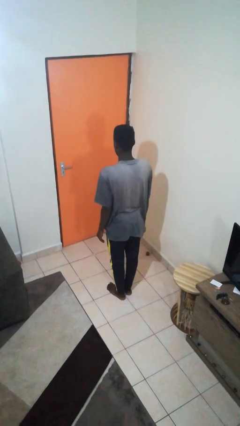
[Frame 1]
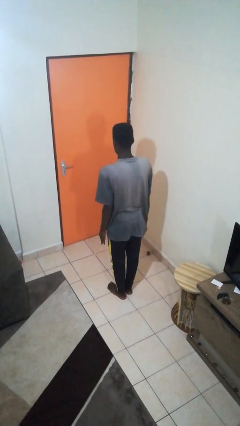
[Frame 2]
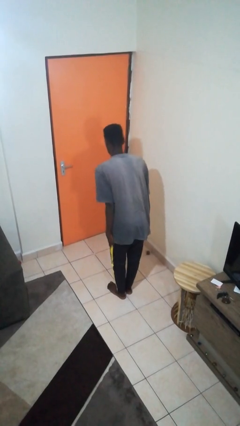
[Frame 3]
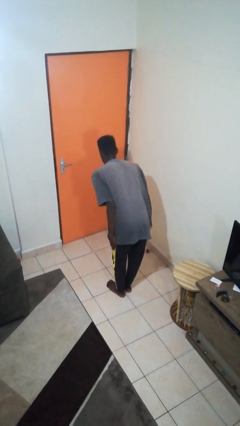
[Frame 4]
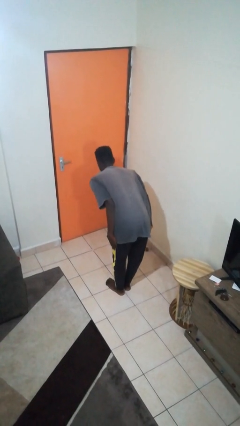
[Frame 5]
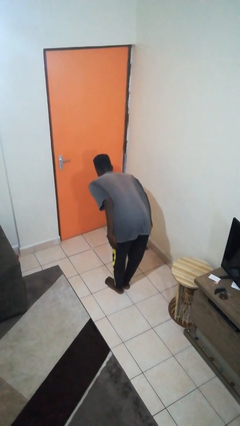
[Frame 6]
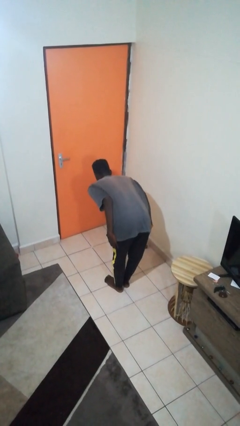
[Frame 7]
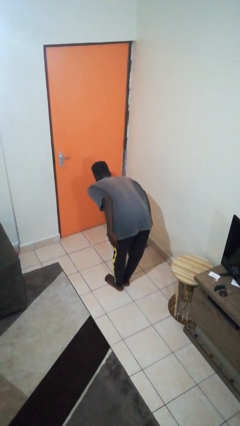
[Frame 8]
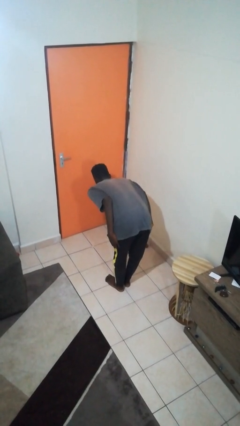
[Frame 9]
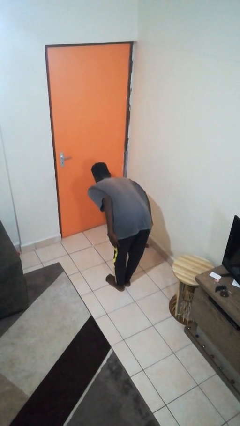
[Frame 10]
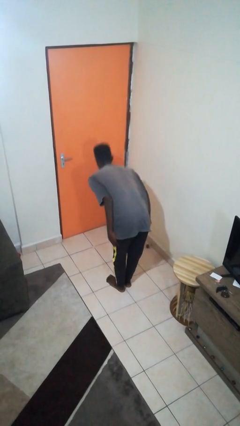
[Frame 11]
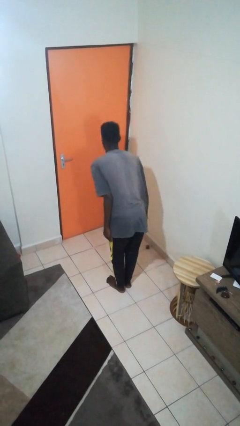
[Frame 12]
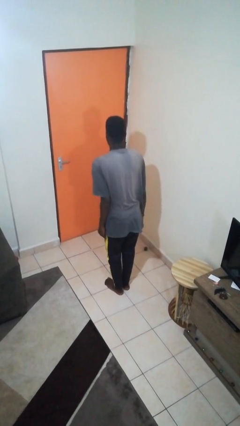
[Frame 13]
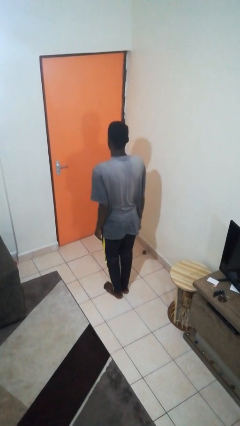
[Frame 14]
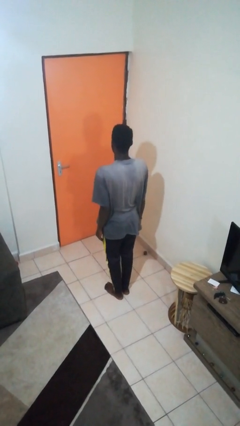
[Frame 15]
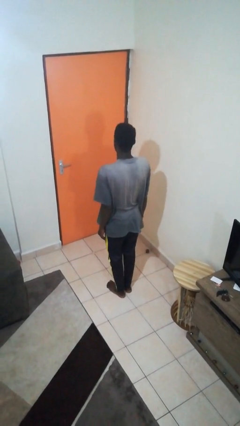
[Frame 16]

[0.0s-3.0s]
person bows

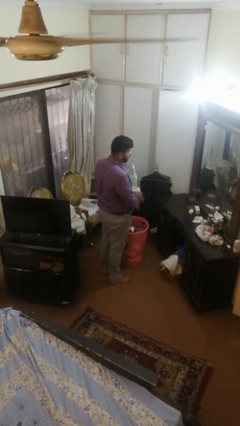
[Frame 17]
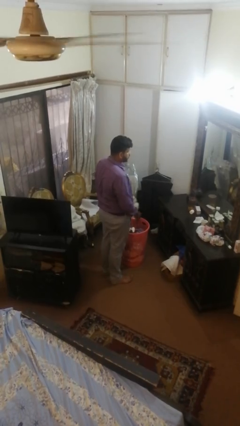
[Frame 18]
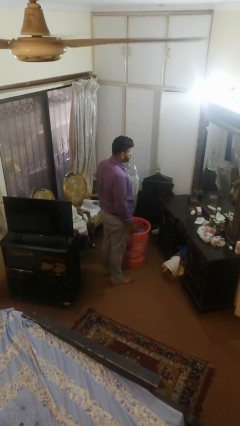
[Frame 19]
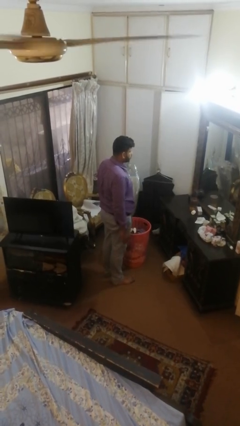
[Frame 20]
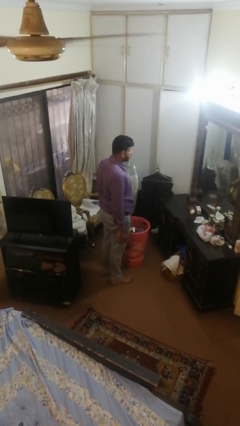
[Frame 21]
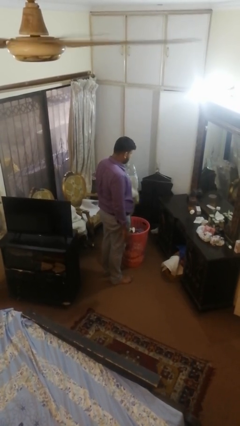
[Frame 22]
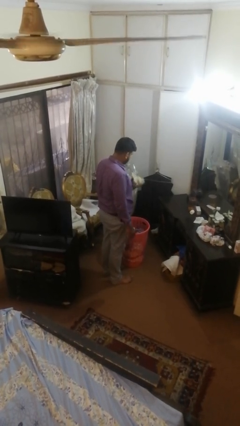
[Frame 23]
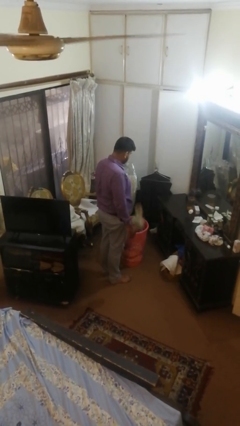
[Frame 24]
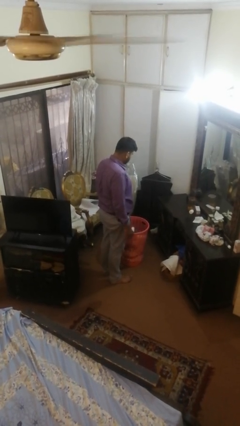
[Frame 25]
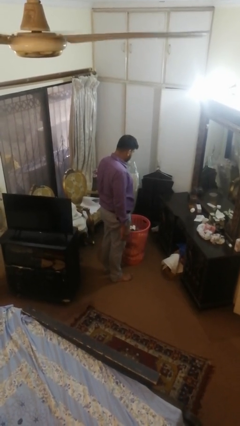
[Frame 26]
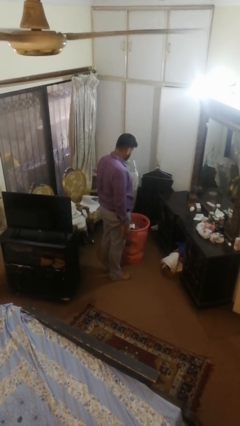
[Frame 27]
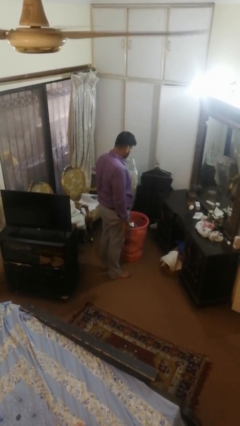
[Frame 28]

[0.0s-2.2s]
person puts object into basket

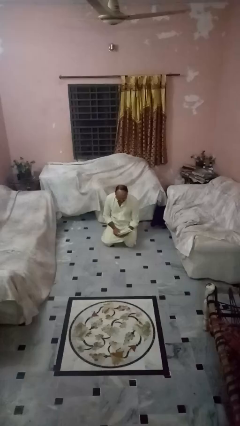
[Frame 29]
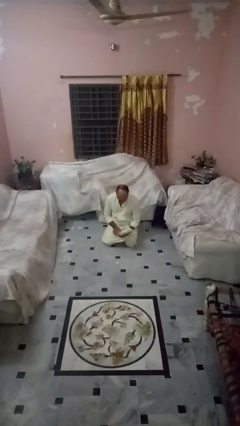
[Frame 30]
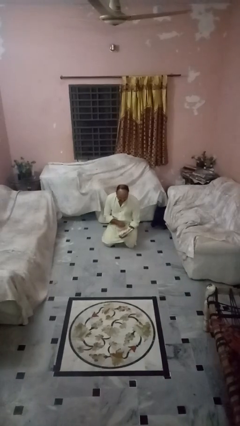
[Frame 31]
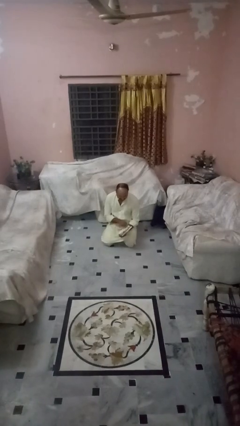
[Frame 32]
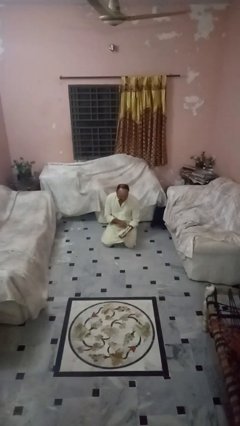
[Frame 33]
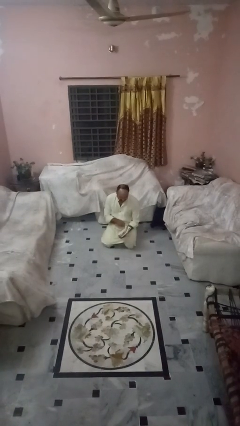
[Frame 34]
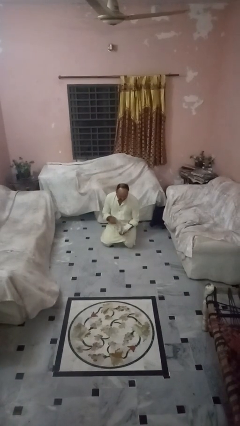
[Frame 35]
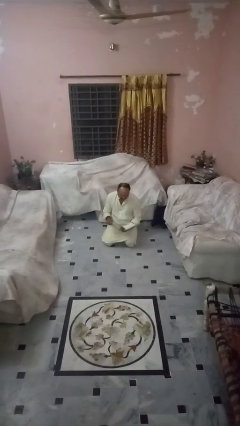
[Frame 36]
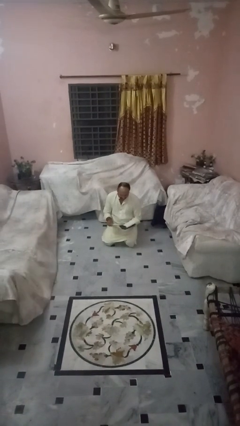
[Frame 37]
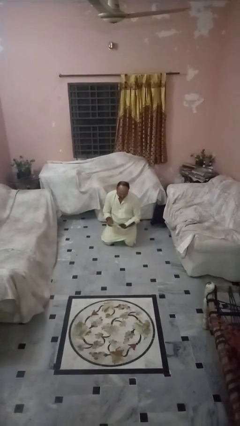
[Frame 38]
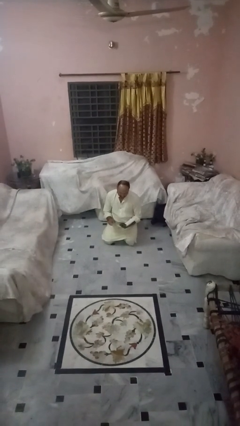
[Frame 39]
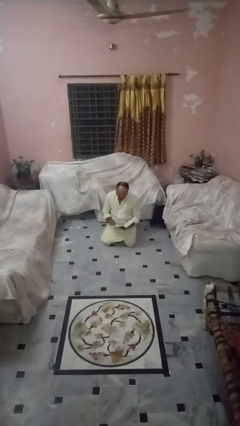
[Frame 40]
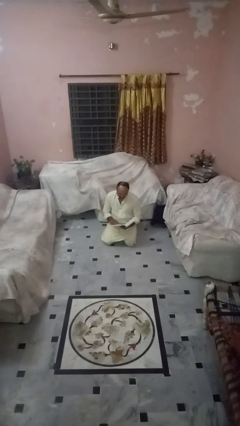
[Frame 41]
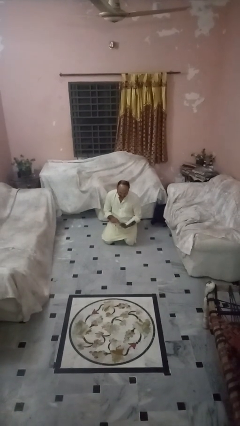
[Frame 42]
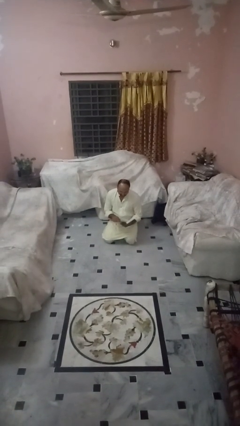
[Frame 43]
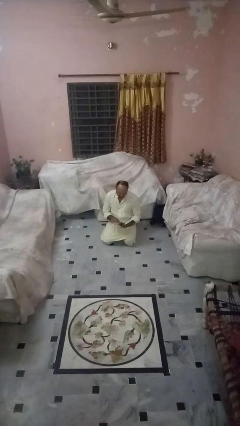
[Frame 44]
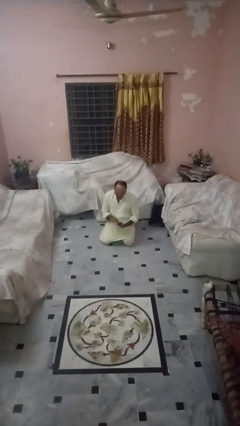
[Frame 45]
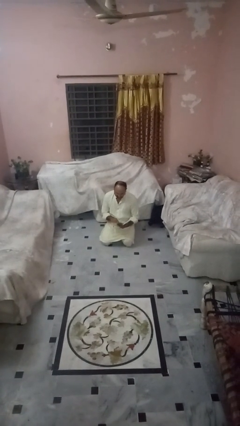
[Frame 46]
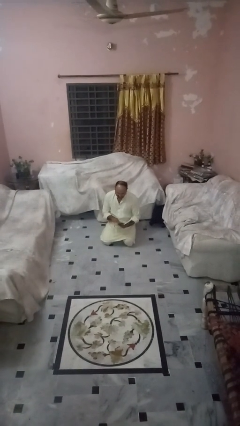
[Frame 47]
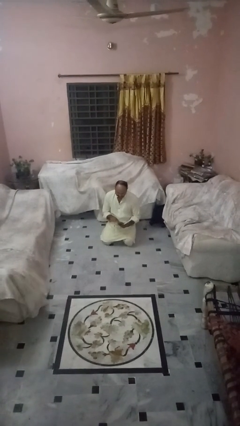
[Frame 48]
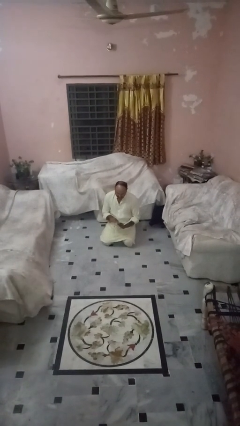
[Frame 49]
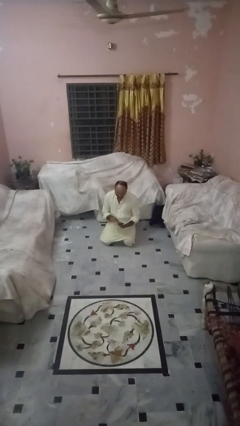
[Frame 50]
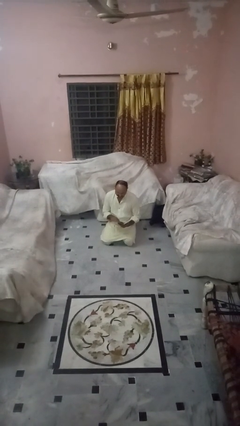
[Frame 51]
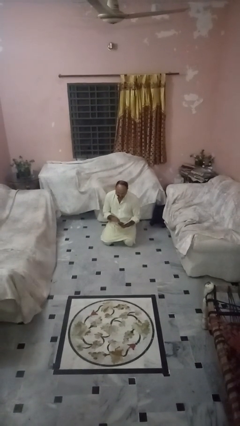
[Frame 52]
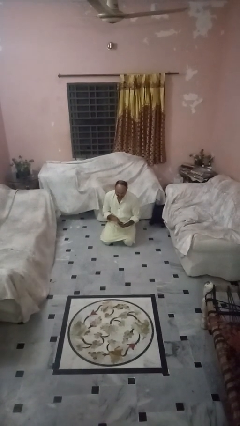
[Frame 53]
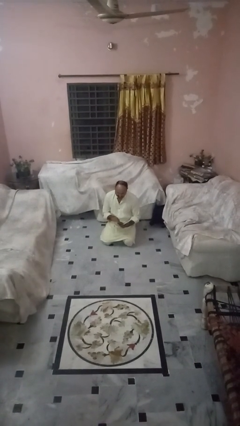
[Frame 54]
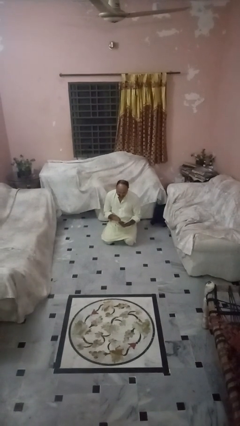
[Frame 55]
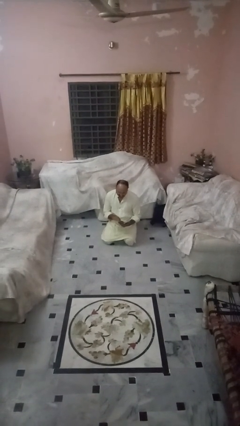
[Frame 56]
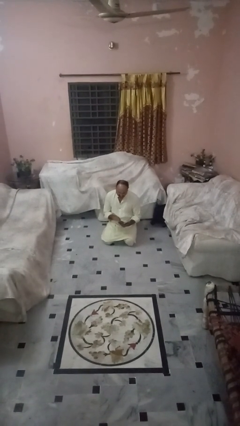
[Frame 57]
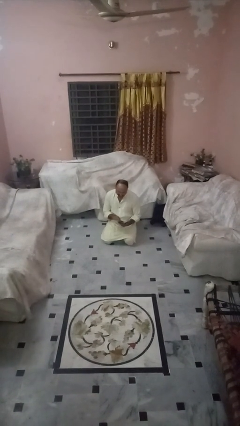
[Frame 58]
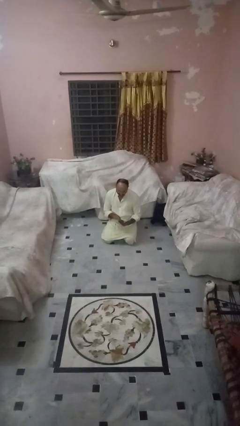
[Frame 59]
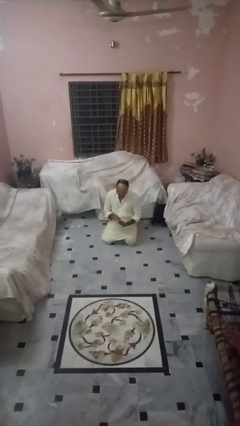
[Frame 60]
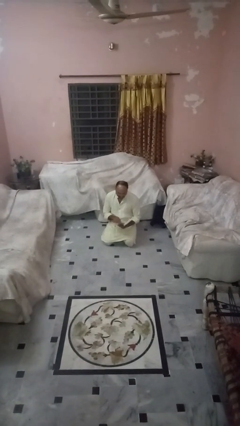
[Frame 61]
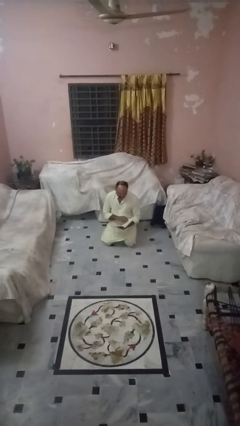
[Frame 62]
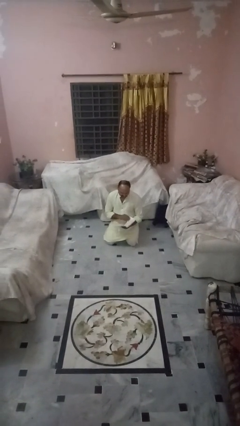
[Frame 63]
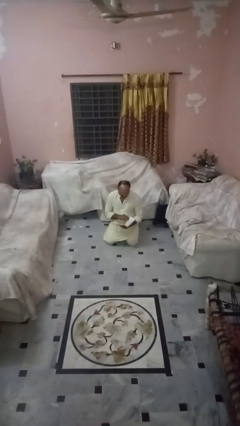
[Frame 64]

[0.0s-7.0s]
person reads magazine

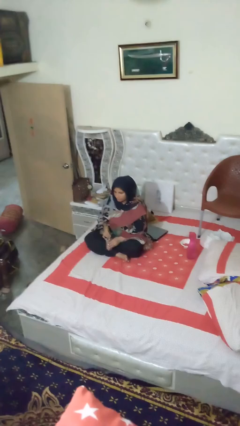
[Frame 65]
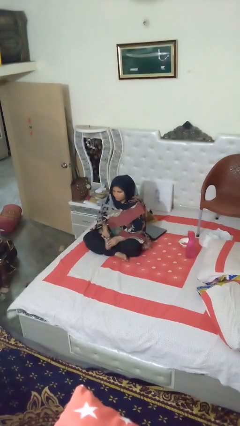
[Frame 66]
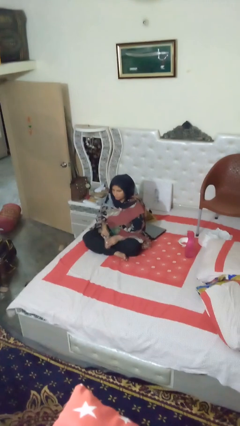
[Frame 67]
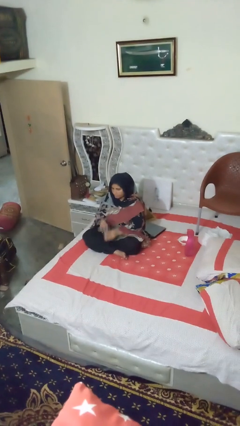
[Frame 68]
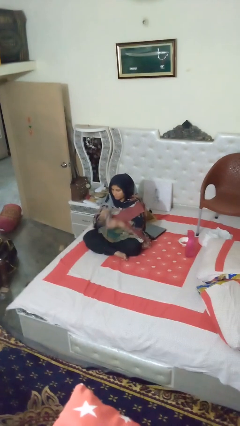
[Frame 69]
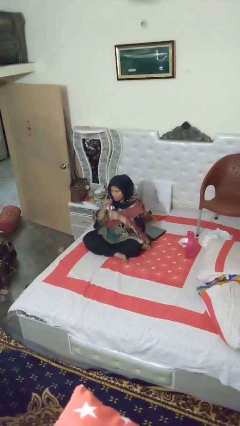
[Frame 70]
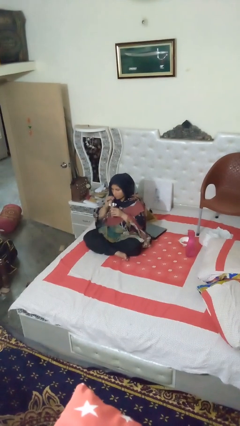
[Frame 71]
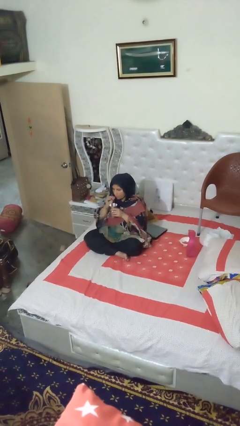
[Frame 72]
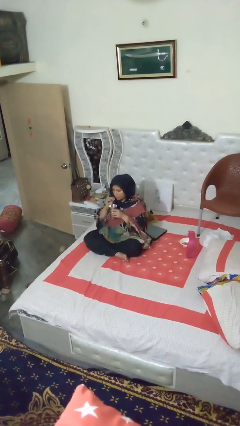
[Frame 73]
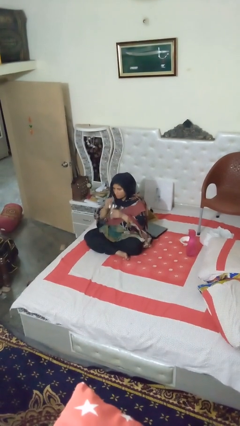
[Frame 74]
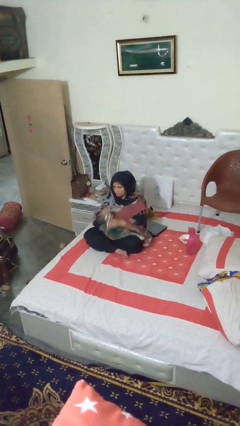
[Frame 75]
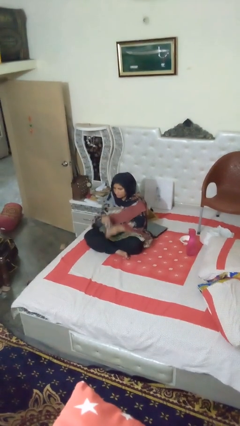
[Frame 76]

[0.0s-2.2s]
person drinks from straw

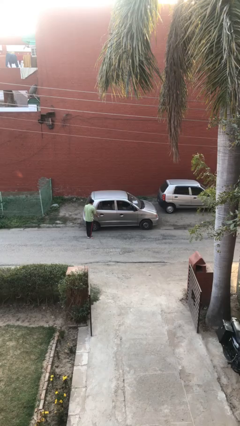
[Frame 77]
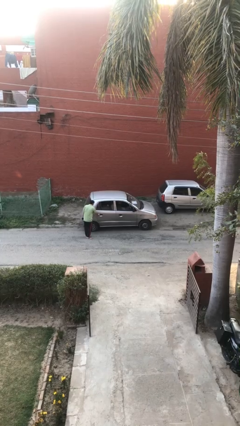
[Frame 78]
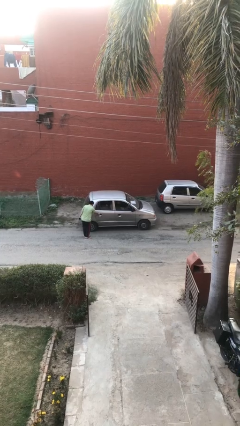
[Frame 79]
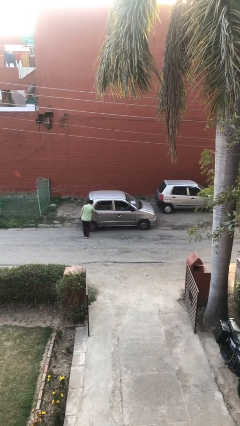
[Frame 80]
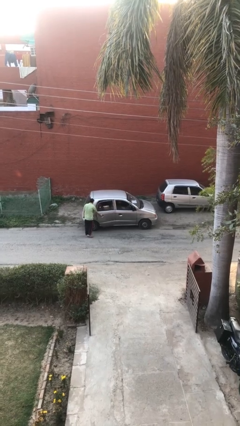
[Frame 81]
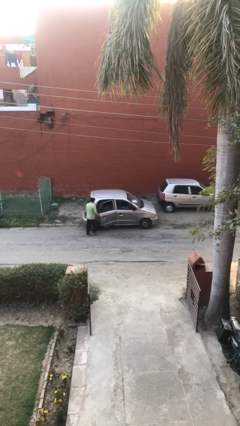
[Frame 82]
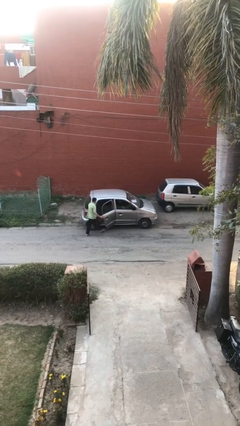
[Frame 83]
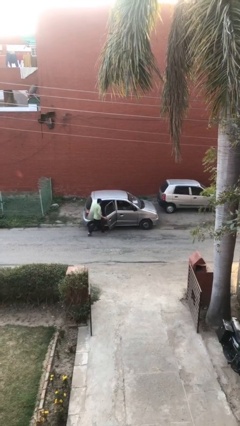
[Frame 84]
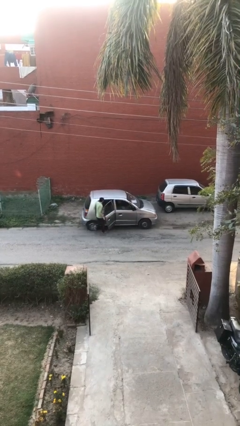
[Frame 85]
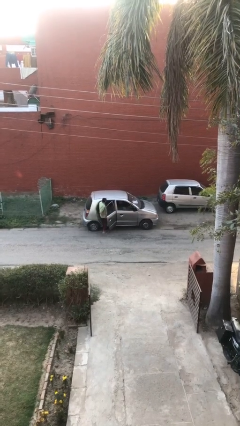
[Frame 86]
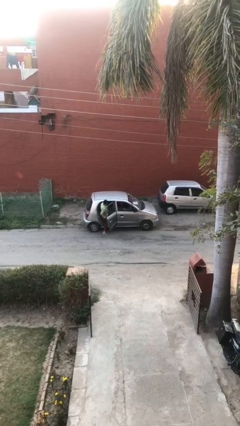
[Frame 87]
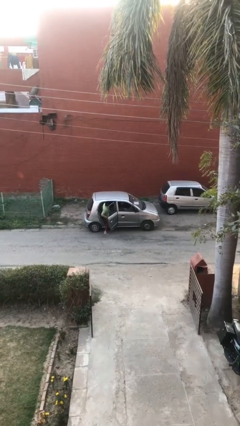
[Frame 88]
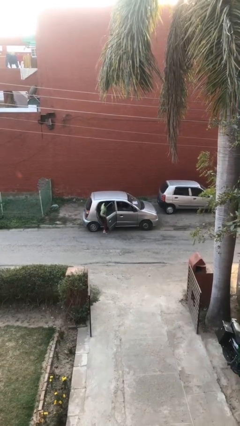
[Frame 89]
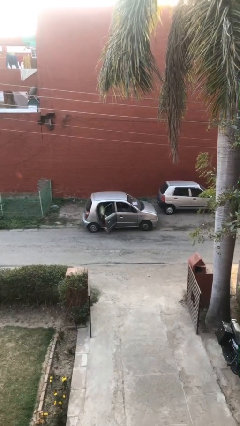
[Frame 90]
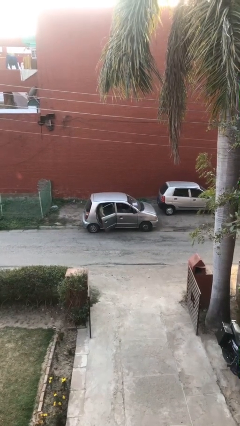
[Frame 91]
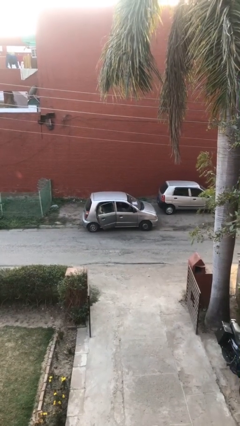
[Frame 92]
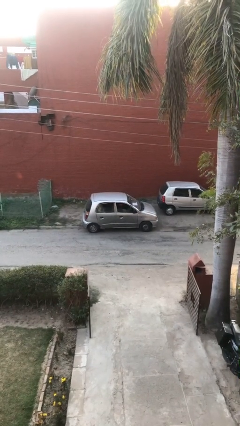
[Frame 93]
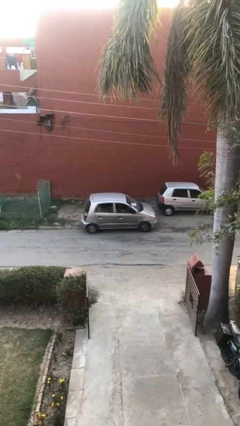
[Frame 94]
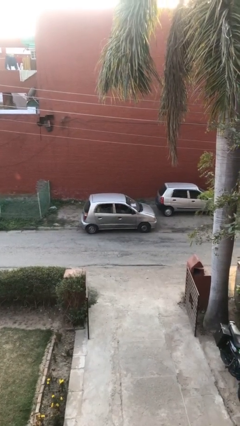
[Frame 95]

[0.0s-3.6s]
car picks up person
